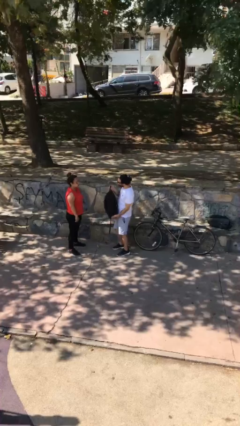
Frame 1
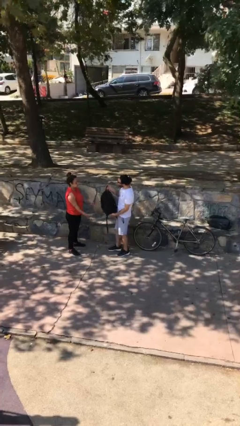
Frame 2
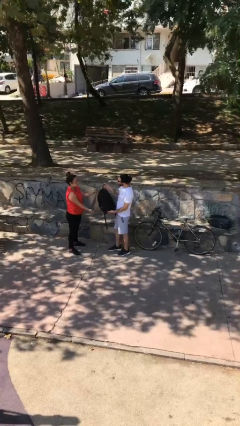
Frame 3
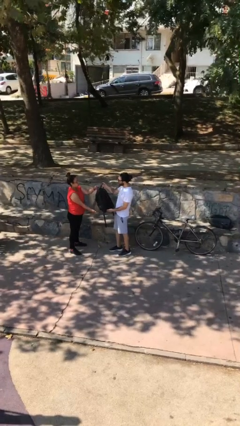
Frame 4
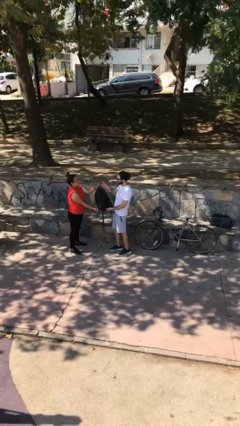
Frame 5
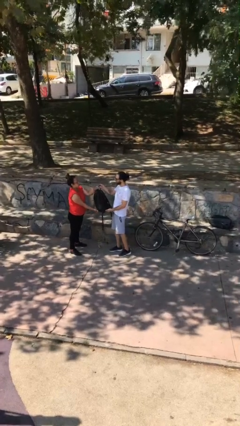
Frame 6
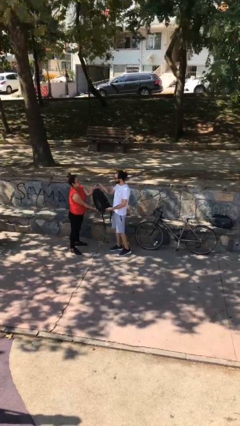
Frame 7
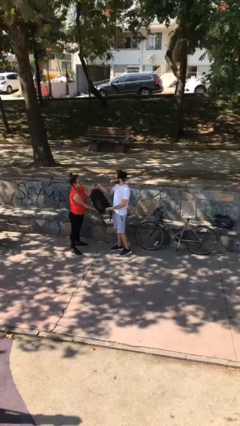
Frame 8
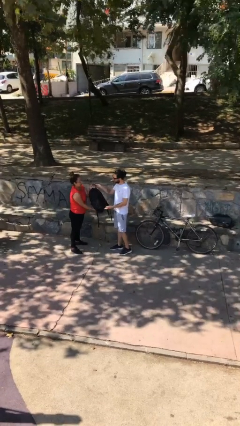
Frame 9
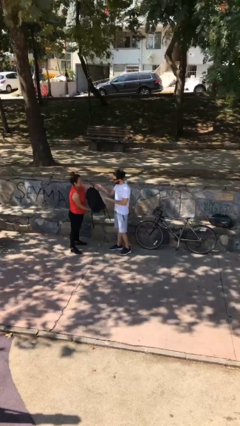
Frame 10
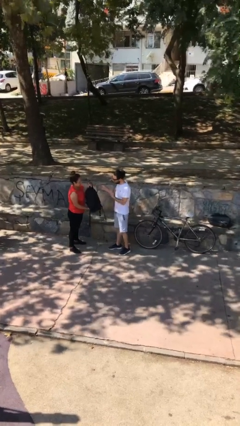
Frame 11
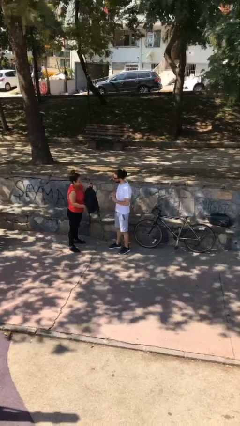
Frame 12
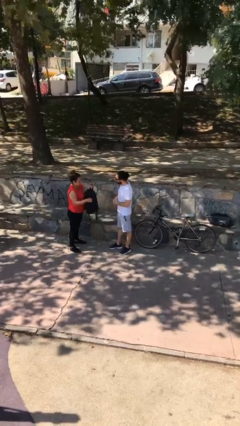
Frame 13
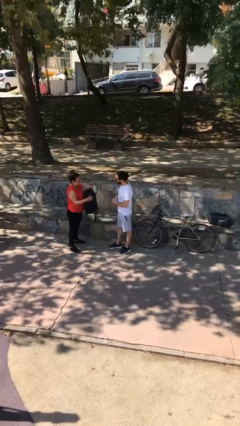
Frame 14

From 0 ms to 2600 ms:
person transfers object to person

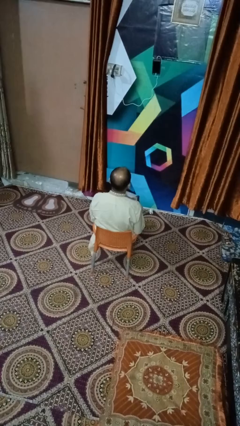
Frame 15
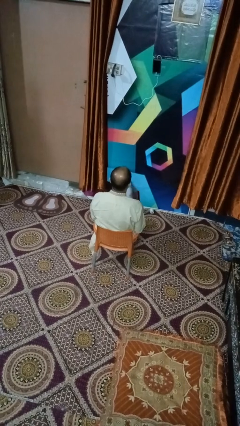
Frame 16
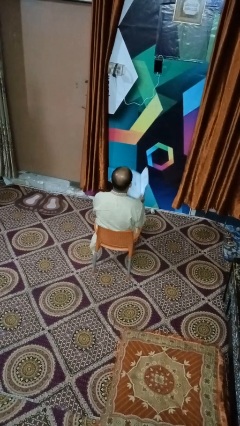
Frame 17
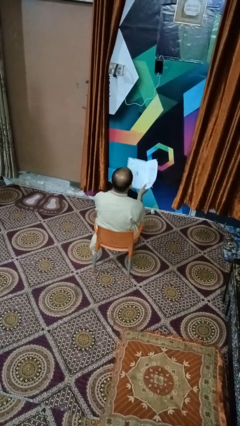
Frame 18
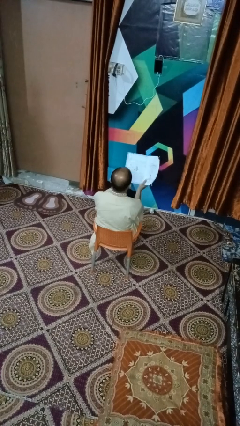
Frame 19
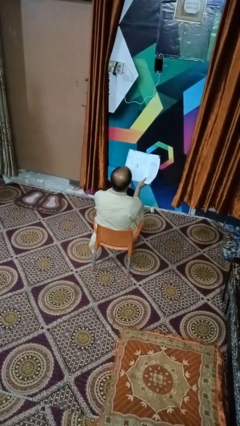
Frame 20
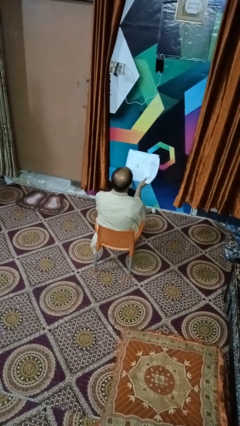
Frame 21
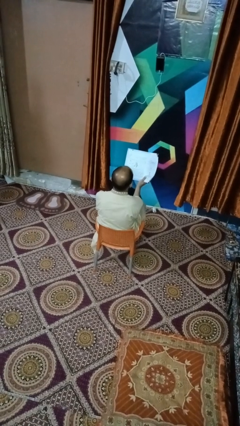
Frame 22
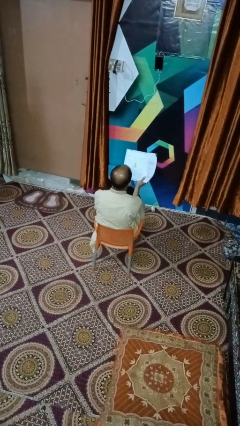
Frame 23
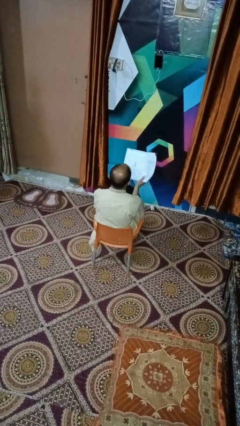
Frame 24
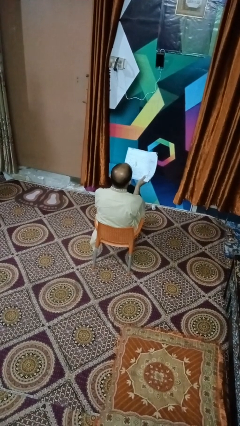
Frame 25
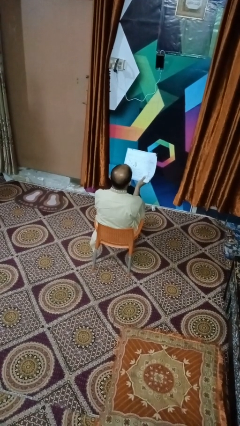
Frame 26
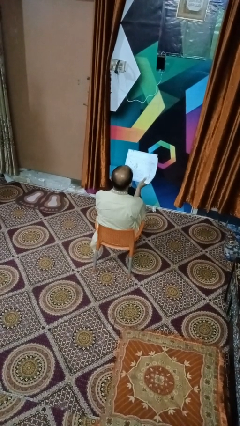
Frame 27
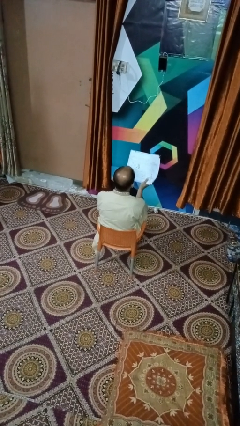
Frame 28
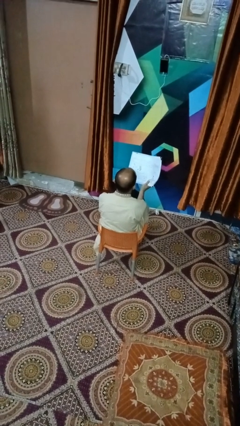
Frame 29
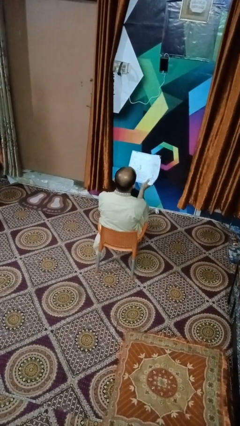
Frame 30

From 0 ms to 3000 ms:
person reads book

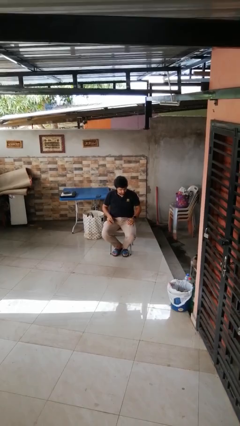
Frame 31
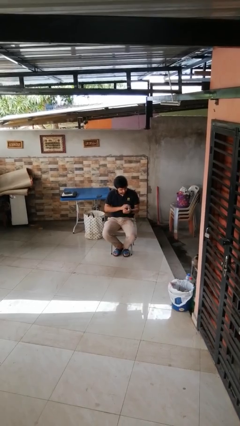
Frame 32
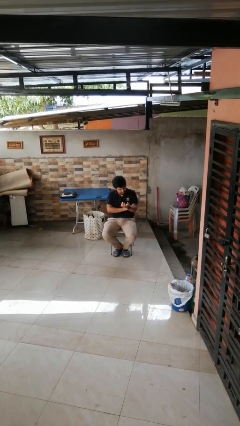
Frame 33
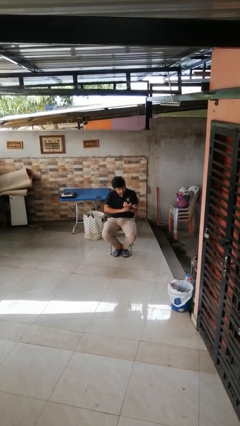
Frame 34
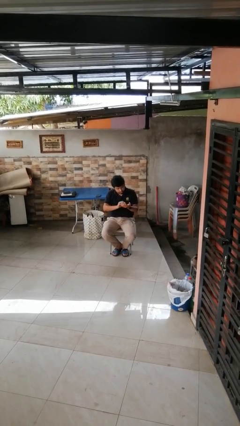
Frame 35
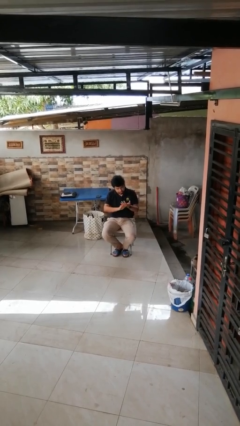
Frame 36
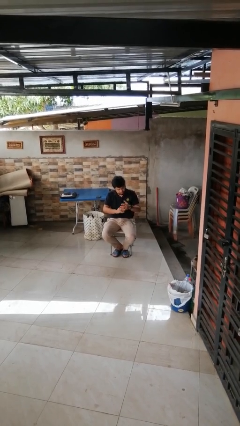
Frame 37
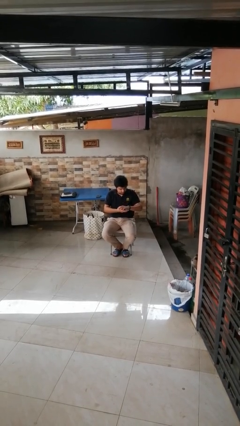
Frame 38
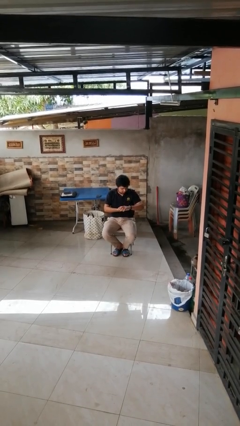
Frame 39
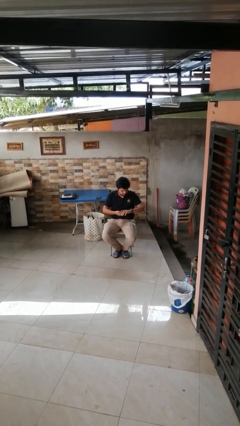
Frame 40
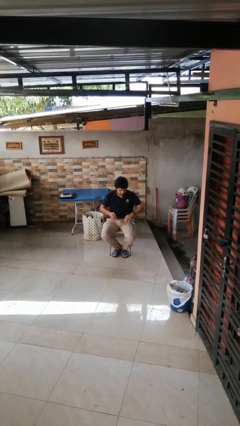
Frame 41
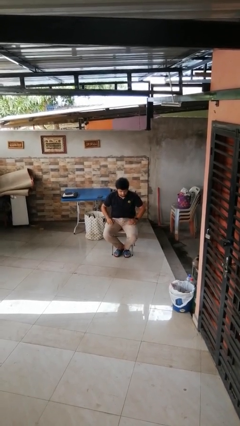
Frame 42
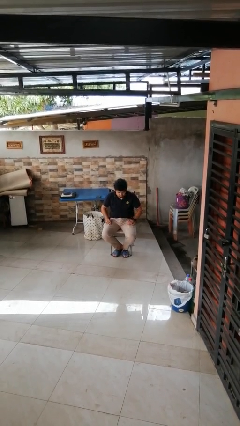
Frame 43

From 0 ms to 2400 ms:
person looks at hands in lap

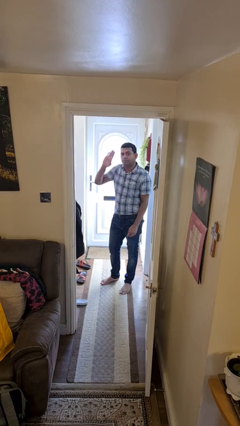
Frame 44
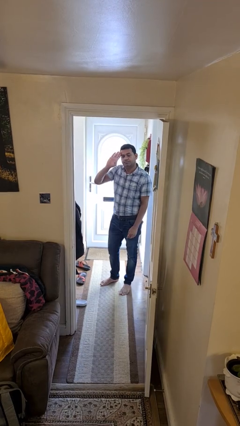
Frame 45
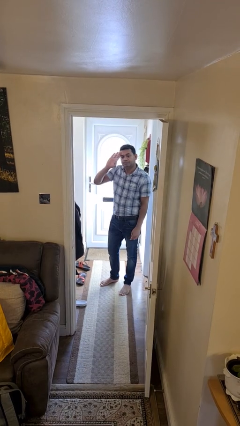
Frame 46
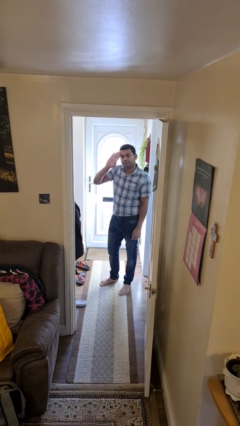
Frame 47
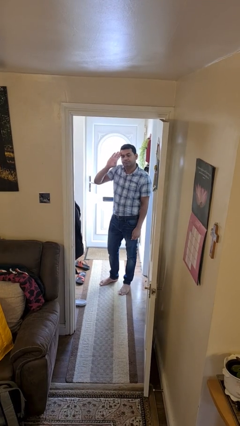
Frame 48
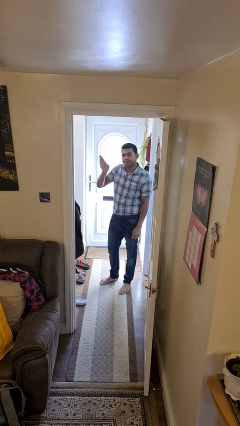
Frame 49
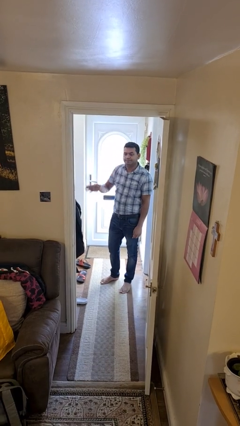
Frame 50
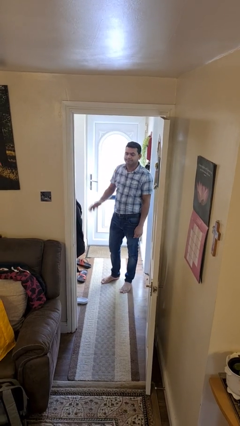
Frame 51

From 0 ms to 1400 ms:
person salutes

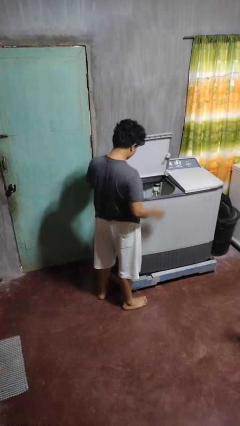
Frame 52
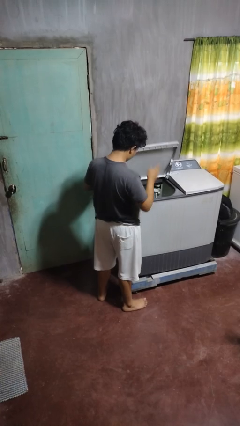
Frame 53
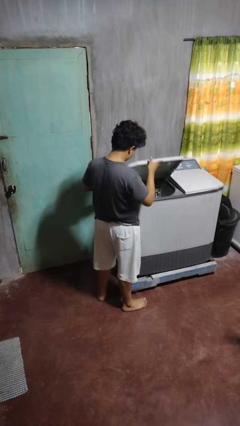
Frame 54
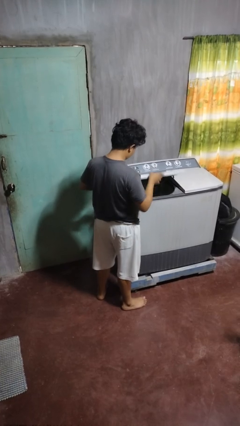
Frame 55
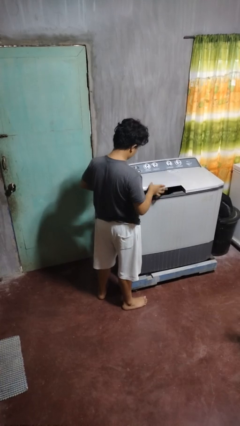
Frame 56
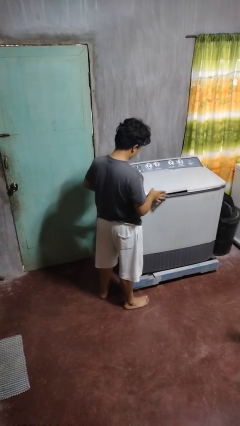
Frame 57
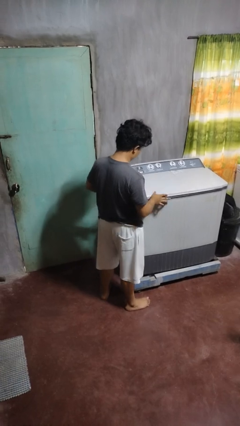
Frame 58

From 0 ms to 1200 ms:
person closes clothes washer

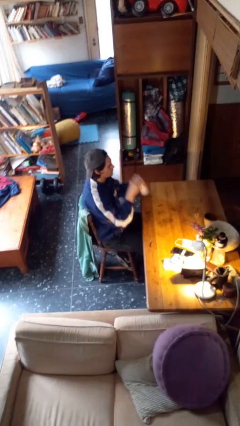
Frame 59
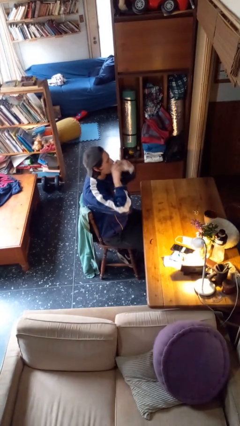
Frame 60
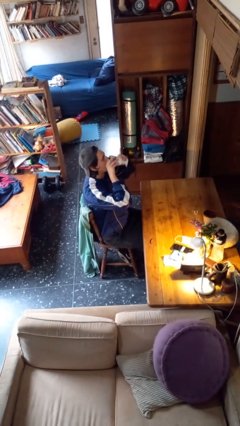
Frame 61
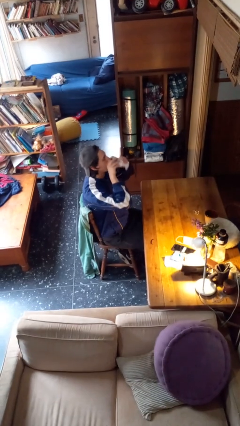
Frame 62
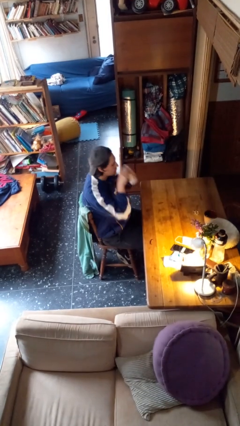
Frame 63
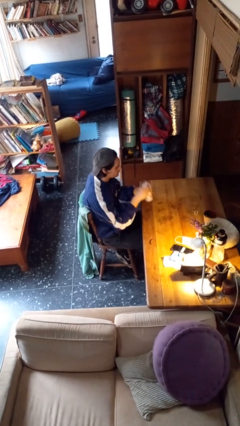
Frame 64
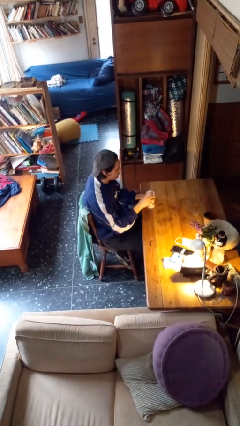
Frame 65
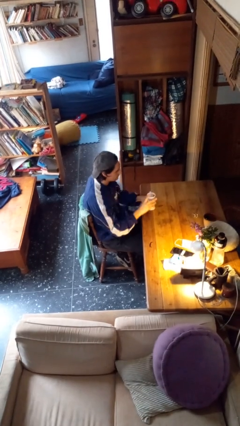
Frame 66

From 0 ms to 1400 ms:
person drinks from mug

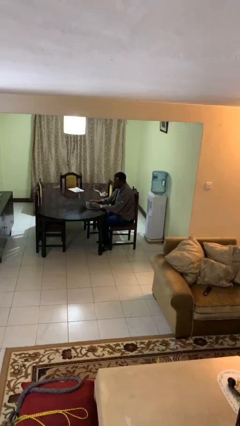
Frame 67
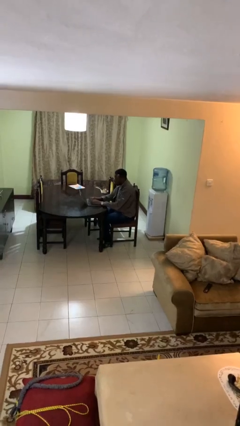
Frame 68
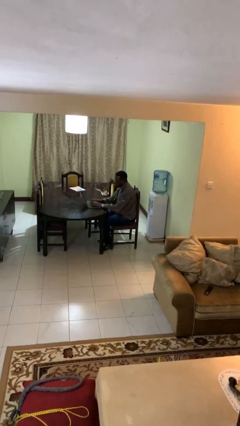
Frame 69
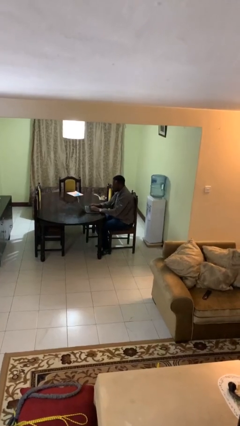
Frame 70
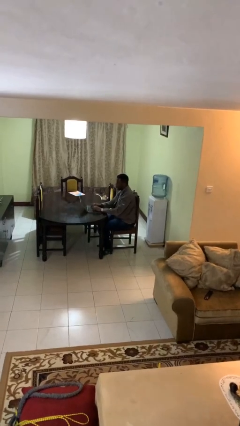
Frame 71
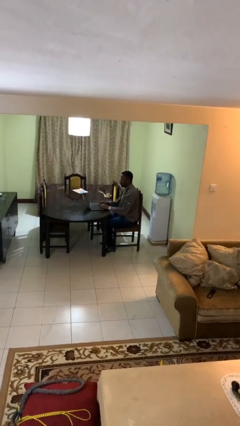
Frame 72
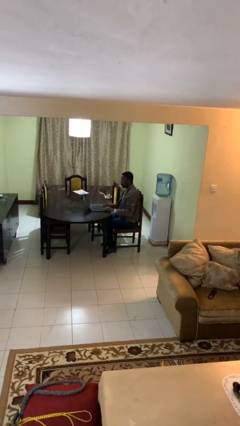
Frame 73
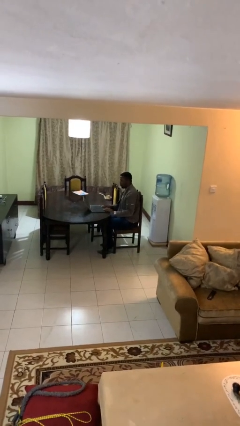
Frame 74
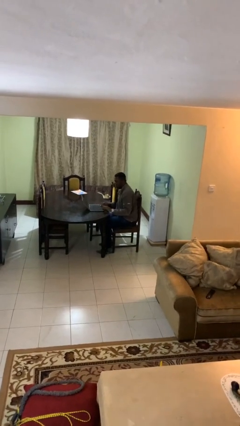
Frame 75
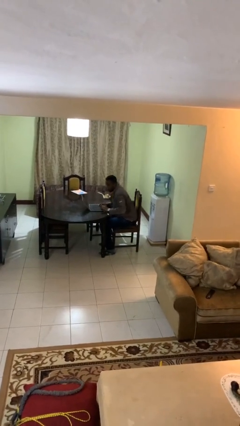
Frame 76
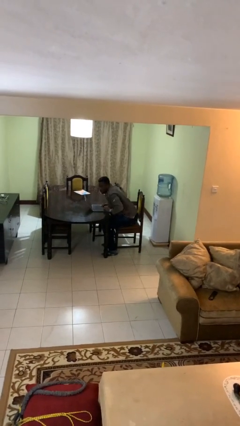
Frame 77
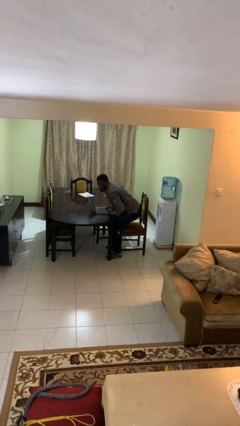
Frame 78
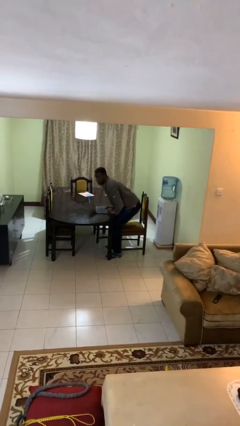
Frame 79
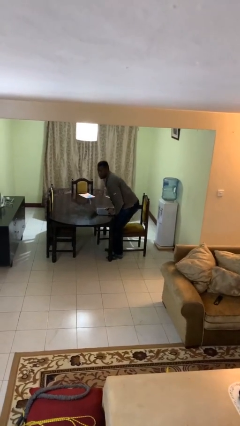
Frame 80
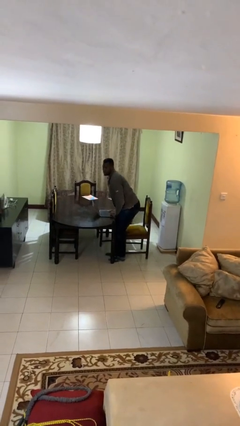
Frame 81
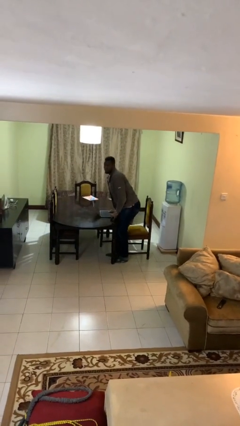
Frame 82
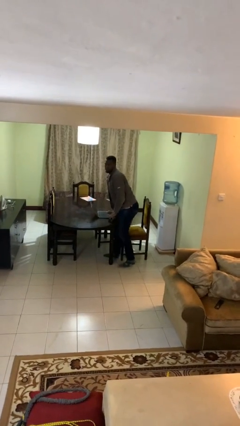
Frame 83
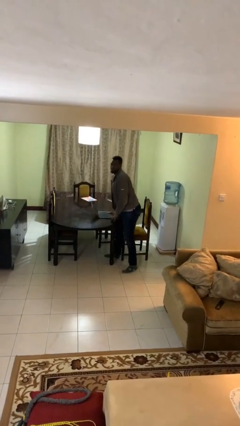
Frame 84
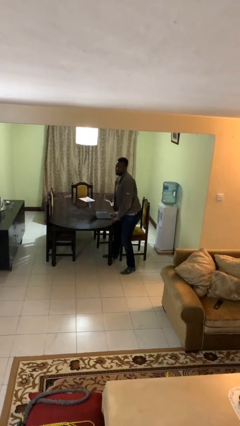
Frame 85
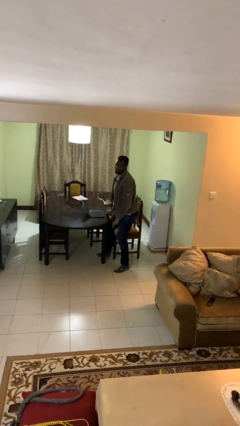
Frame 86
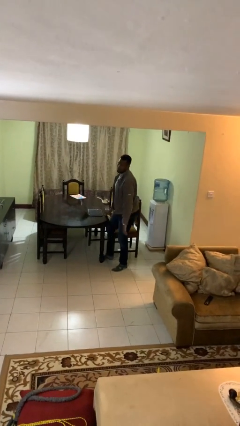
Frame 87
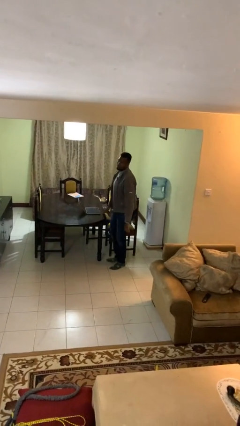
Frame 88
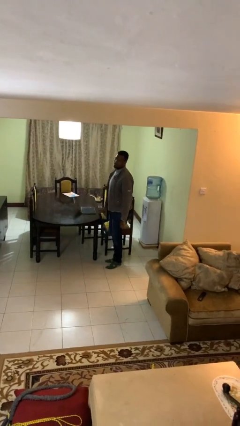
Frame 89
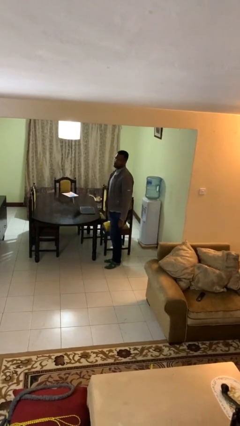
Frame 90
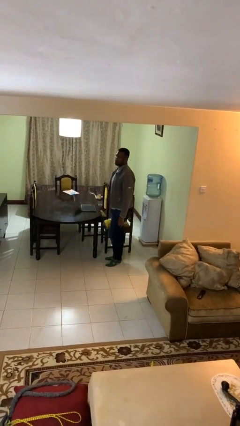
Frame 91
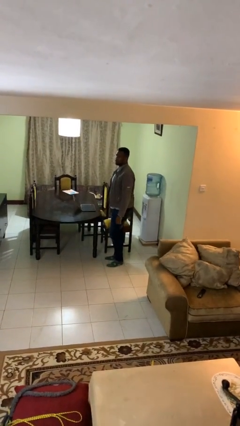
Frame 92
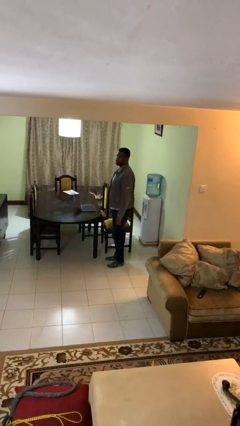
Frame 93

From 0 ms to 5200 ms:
person stands up
